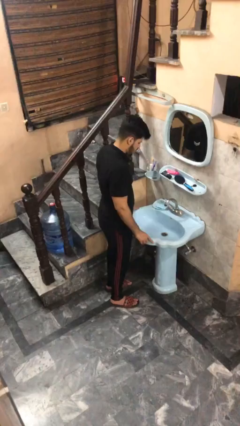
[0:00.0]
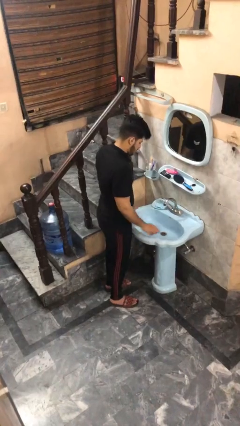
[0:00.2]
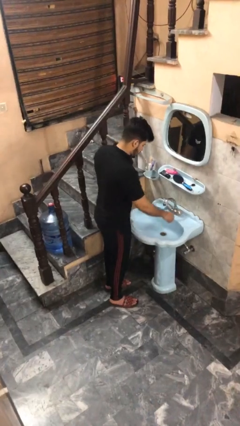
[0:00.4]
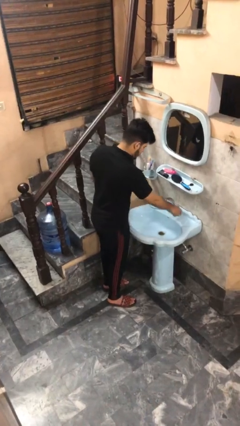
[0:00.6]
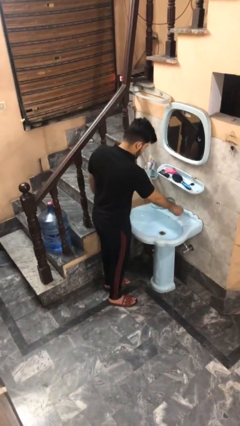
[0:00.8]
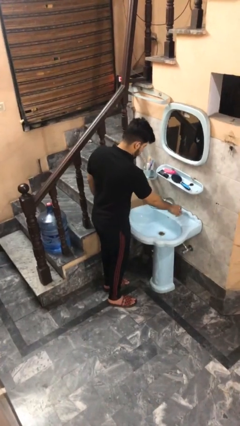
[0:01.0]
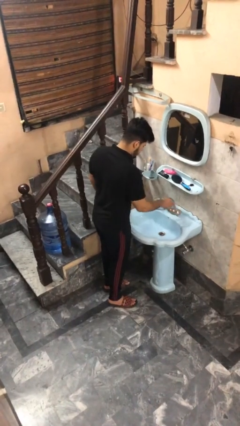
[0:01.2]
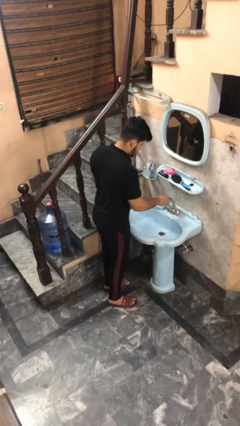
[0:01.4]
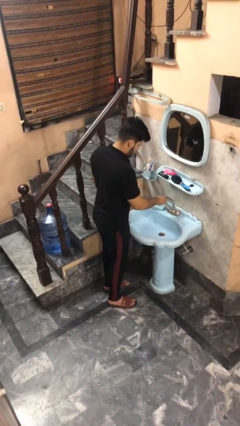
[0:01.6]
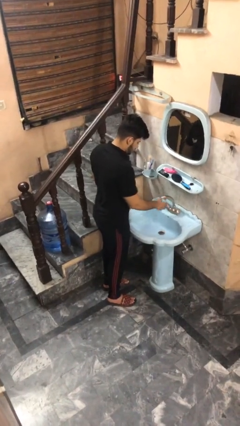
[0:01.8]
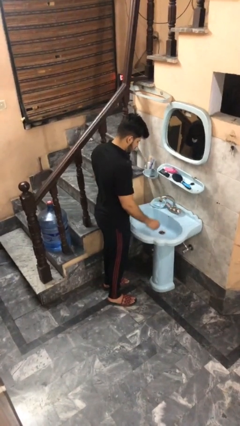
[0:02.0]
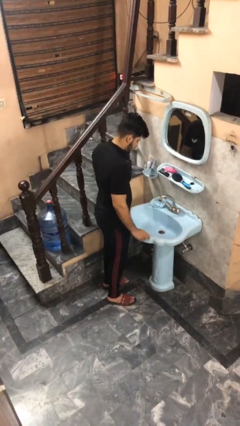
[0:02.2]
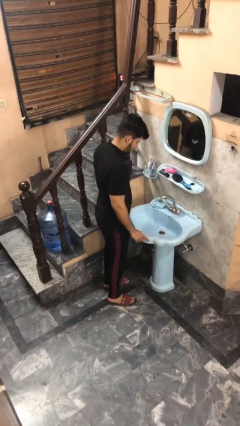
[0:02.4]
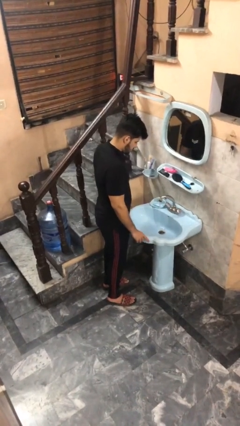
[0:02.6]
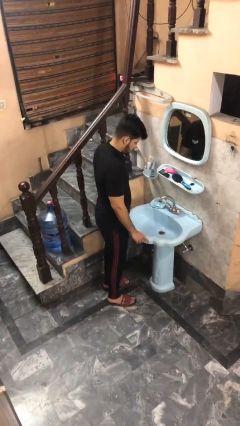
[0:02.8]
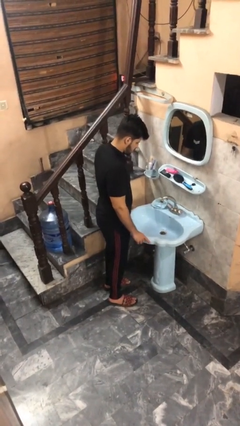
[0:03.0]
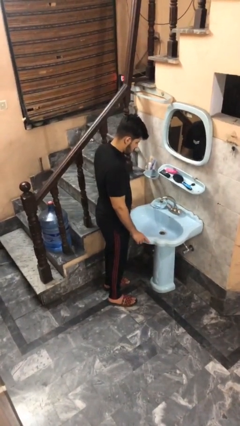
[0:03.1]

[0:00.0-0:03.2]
person turns on faucet

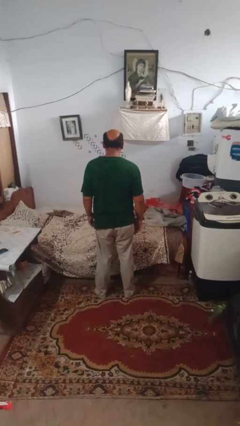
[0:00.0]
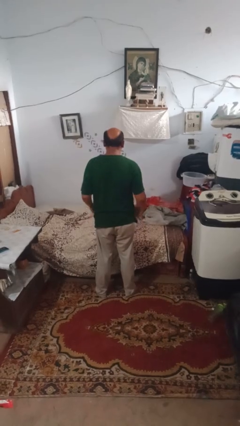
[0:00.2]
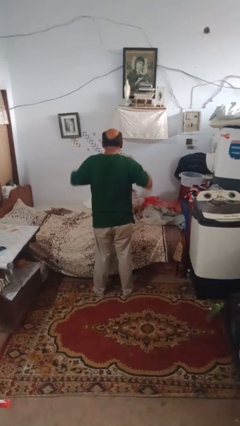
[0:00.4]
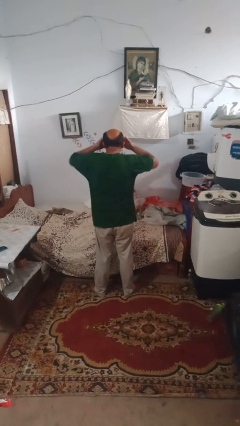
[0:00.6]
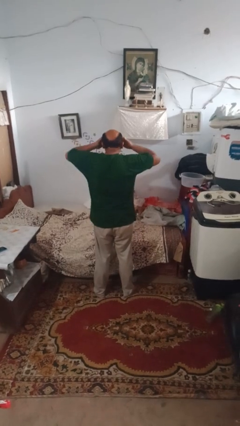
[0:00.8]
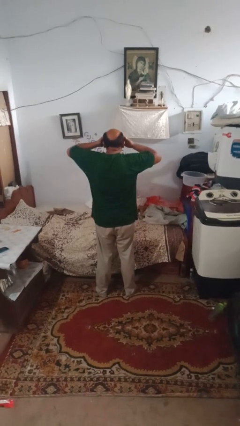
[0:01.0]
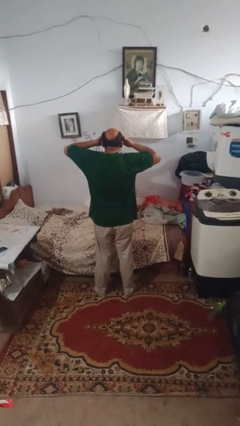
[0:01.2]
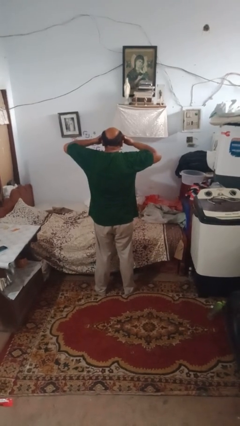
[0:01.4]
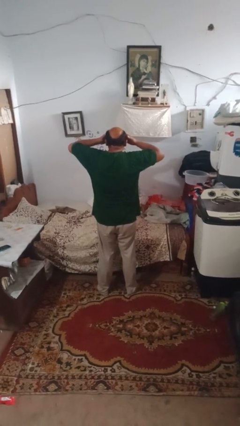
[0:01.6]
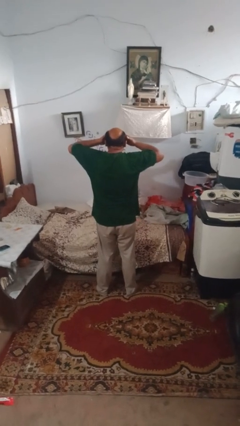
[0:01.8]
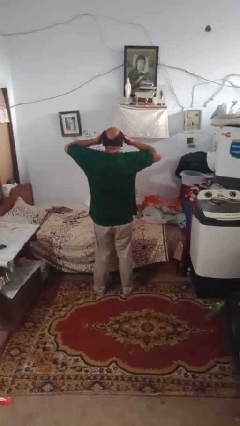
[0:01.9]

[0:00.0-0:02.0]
person rubs eyes

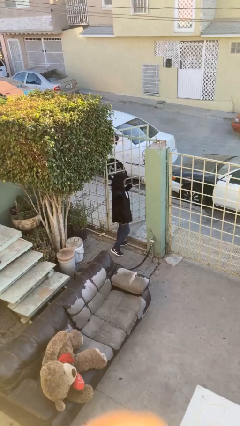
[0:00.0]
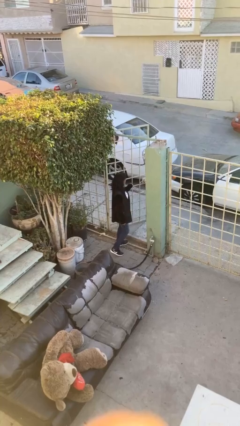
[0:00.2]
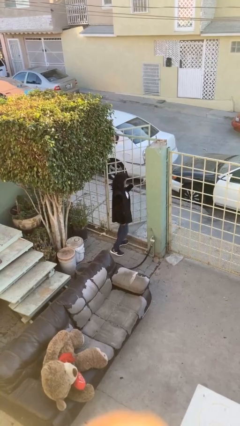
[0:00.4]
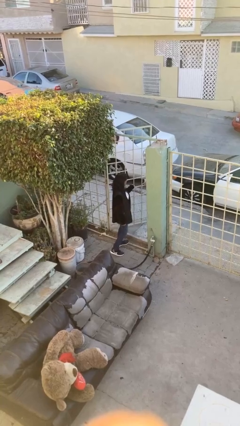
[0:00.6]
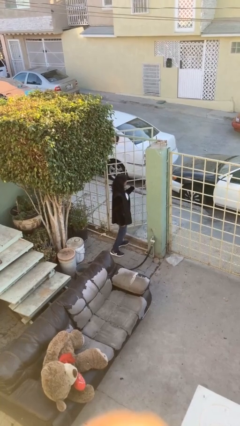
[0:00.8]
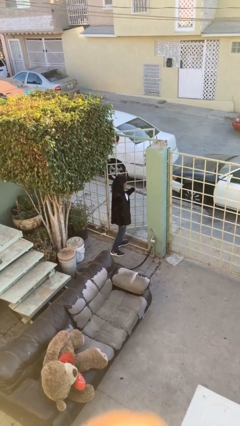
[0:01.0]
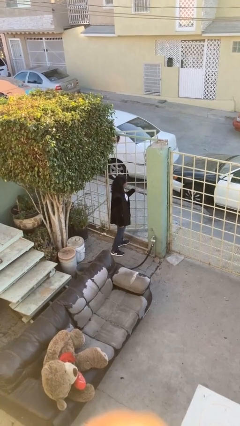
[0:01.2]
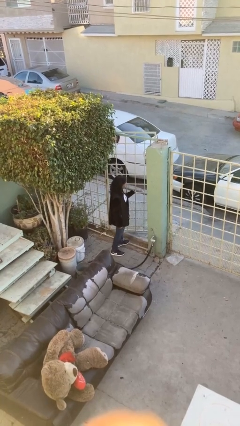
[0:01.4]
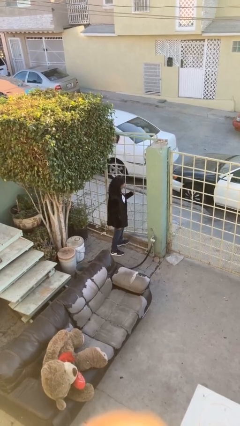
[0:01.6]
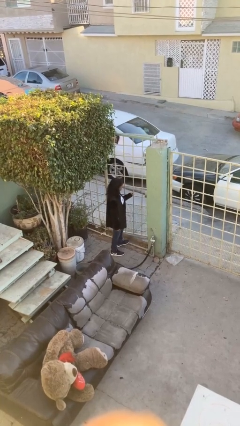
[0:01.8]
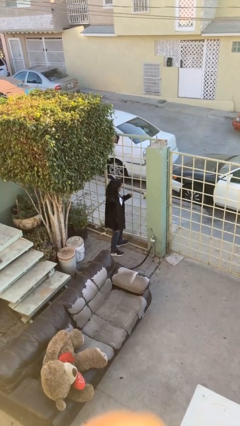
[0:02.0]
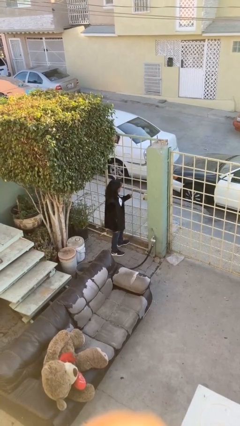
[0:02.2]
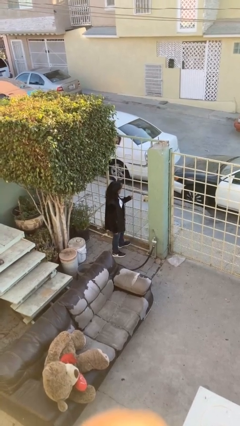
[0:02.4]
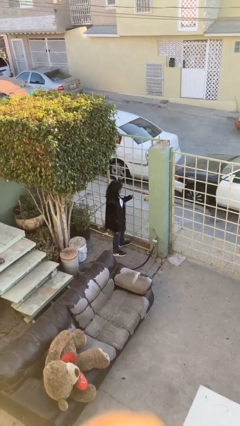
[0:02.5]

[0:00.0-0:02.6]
person closes facility door

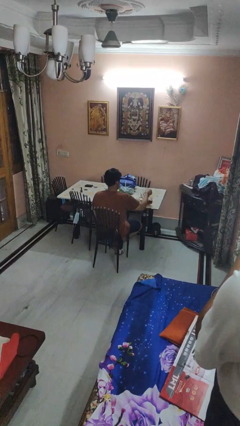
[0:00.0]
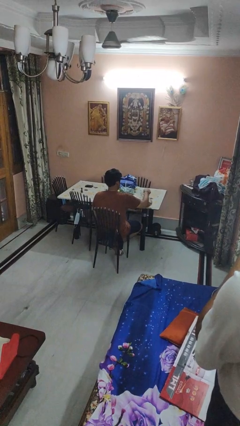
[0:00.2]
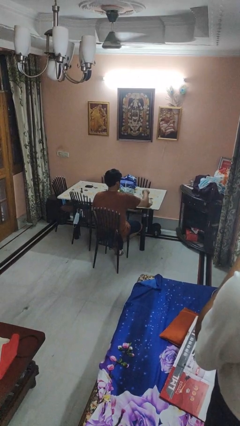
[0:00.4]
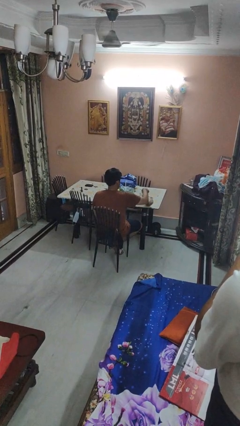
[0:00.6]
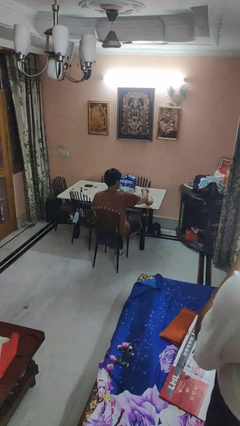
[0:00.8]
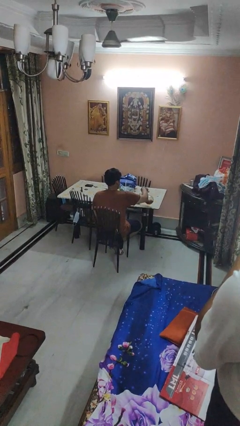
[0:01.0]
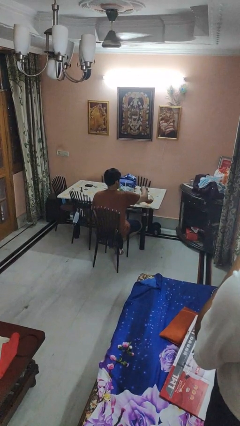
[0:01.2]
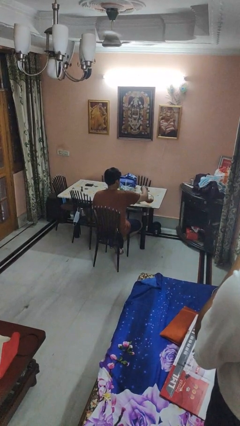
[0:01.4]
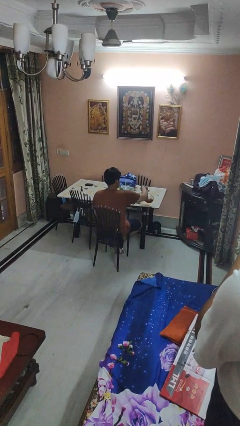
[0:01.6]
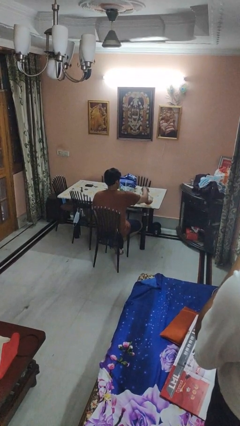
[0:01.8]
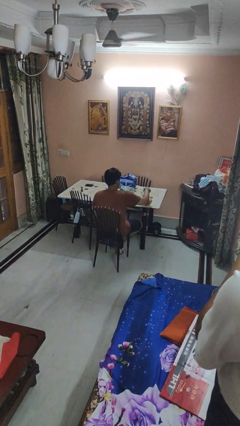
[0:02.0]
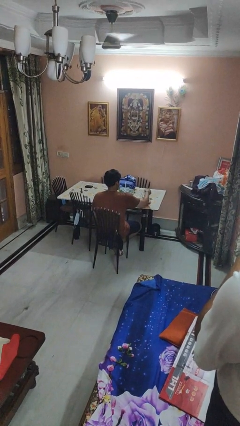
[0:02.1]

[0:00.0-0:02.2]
person pours coffee into mug

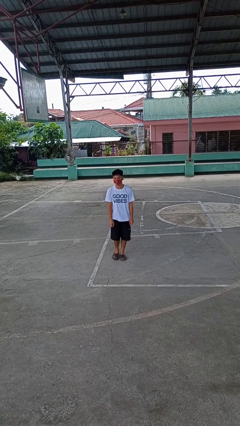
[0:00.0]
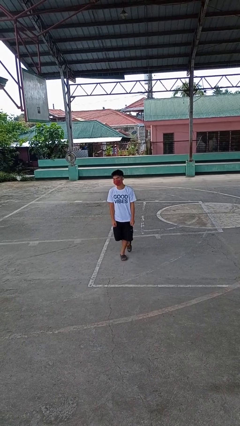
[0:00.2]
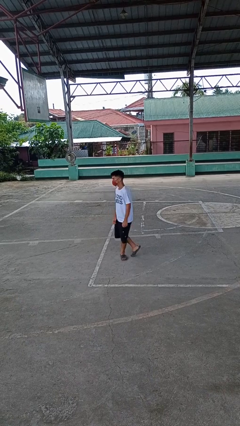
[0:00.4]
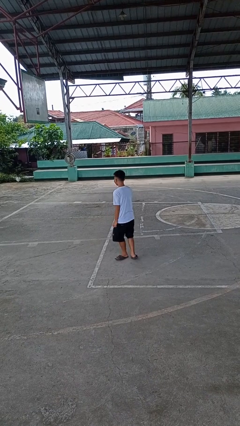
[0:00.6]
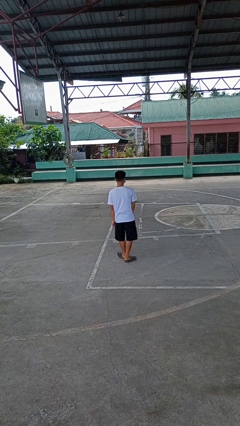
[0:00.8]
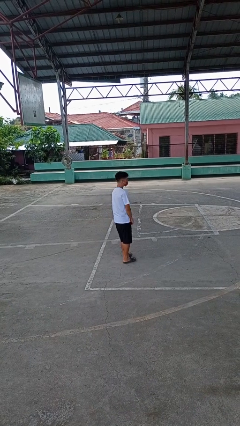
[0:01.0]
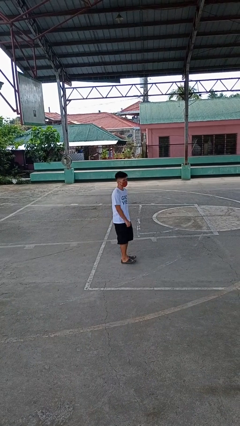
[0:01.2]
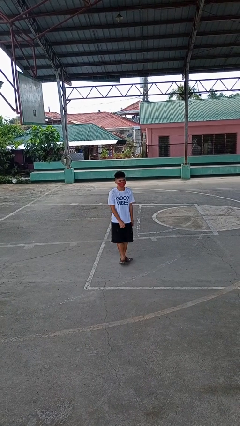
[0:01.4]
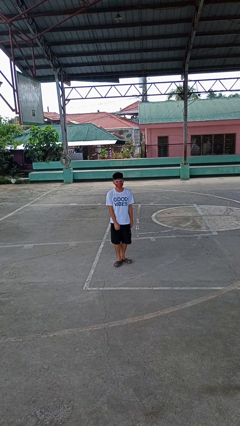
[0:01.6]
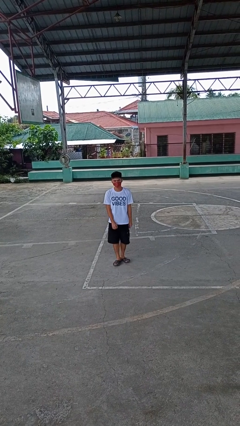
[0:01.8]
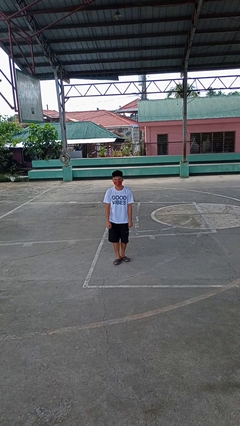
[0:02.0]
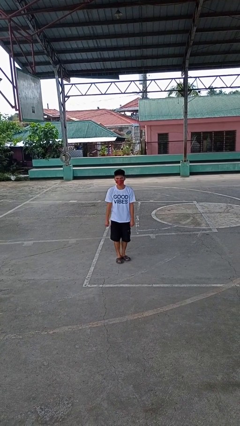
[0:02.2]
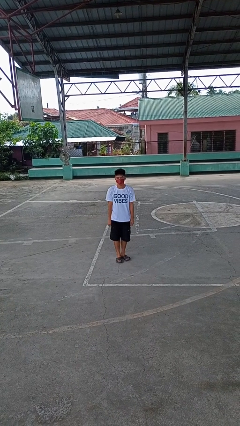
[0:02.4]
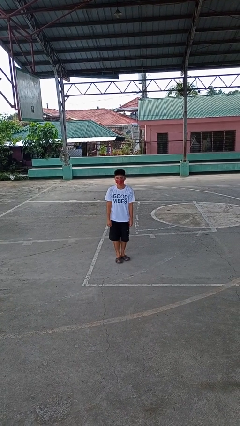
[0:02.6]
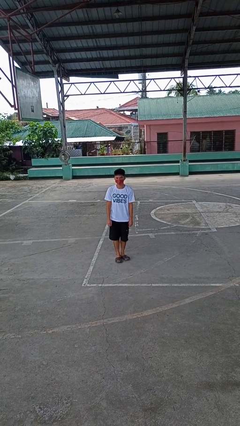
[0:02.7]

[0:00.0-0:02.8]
person twirls

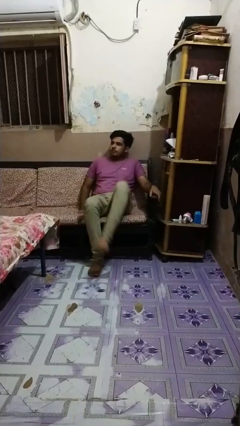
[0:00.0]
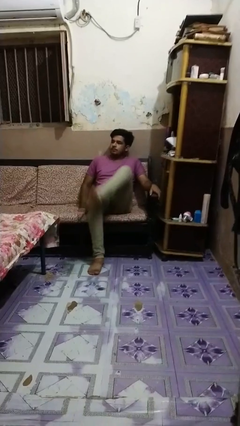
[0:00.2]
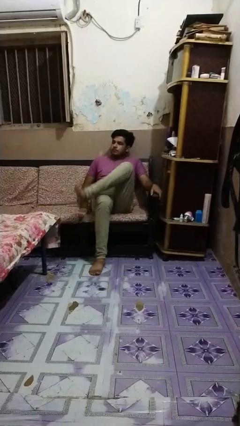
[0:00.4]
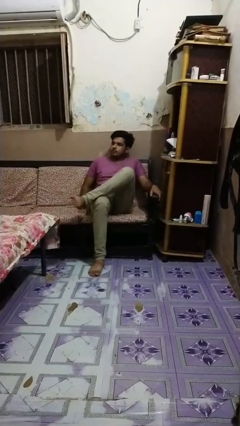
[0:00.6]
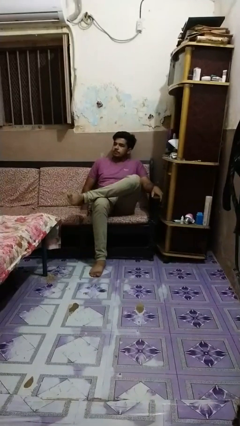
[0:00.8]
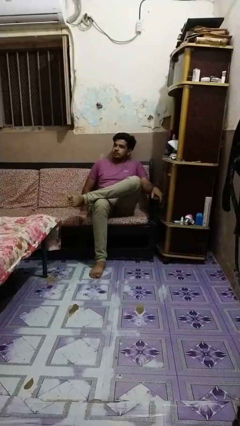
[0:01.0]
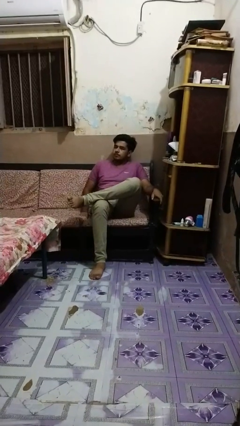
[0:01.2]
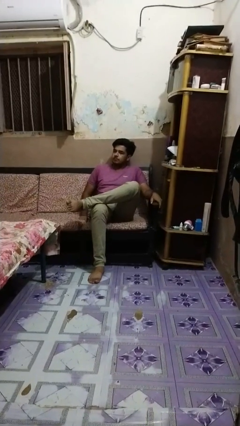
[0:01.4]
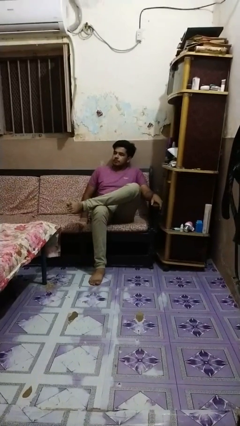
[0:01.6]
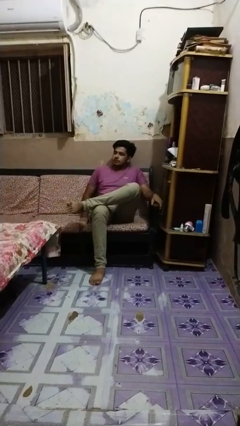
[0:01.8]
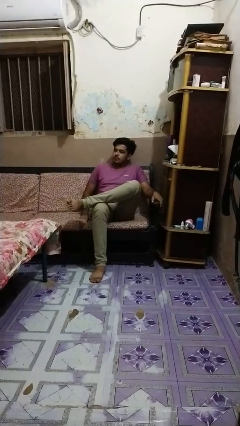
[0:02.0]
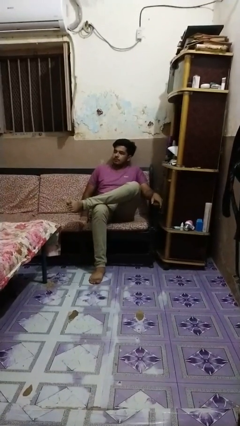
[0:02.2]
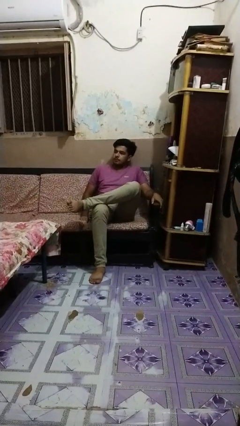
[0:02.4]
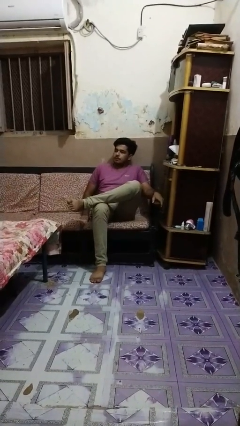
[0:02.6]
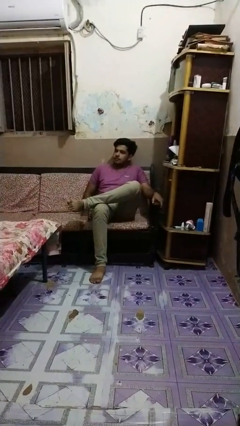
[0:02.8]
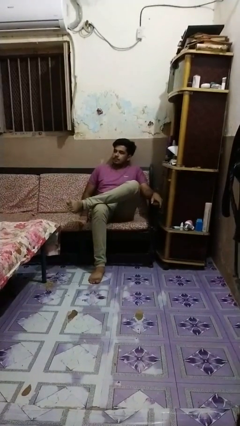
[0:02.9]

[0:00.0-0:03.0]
person crosses legs

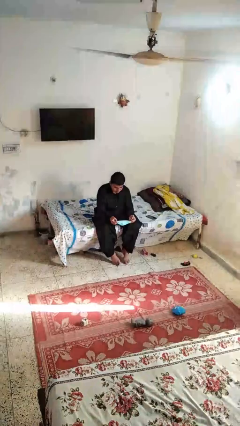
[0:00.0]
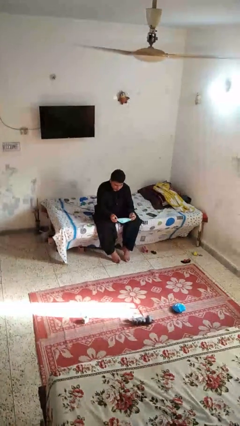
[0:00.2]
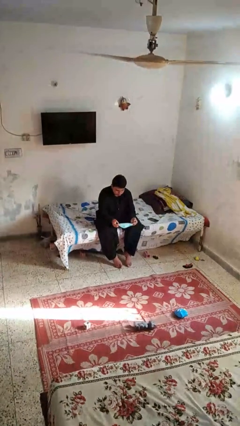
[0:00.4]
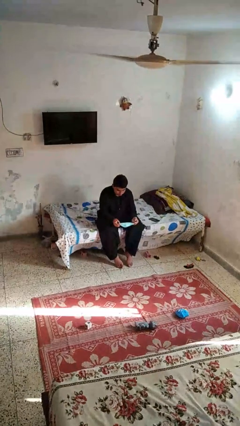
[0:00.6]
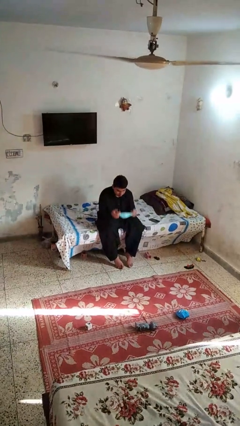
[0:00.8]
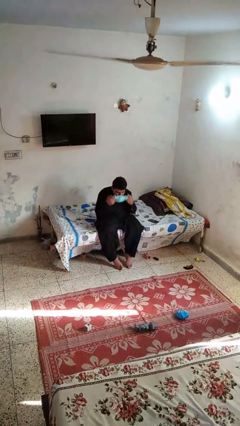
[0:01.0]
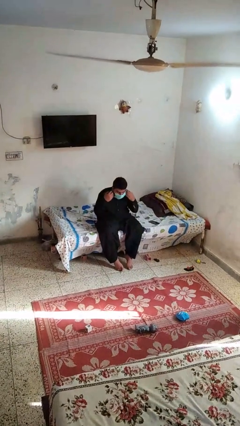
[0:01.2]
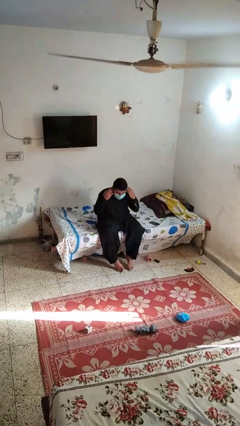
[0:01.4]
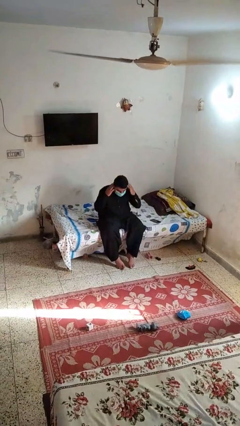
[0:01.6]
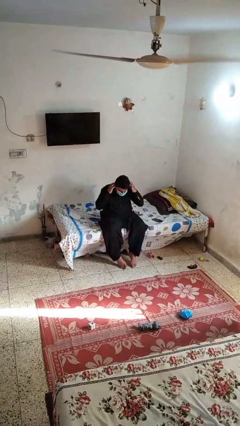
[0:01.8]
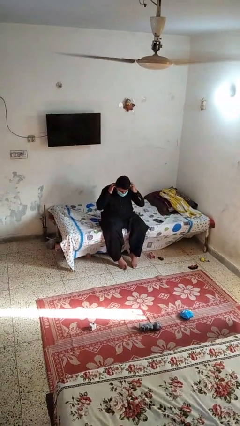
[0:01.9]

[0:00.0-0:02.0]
person puts on facemask
